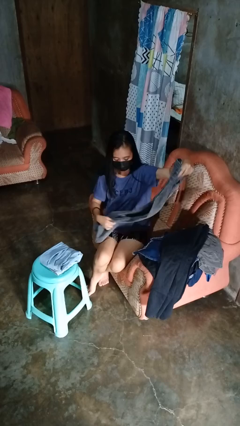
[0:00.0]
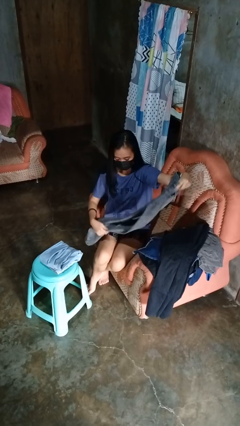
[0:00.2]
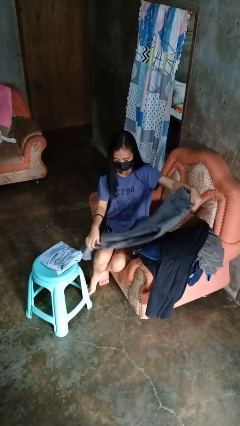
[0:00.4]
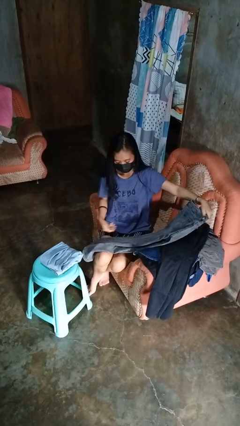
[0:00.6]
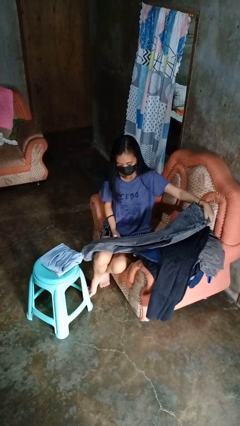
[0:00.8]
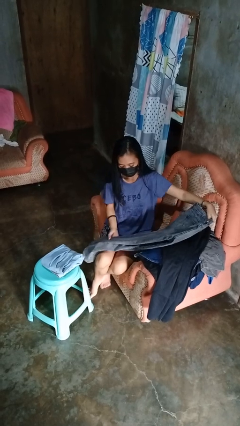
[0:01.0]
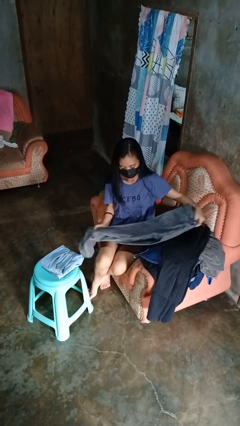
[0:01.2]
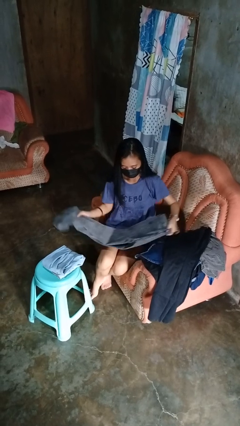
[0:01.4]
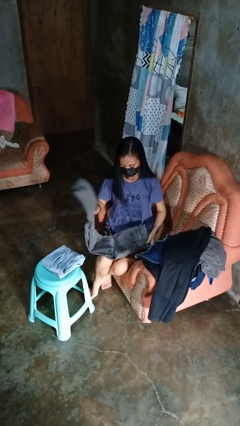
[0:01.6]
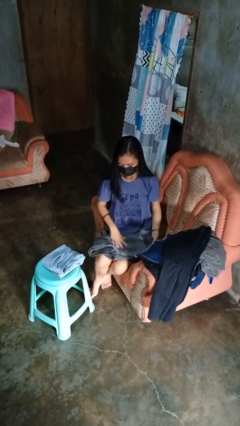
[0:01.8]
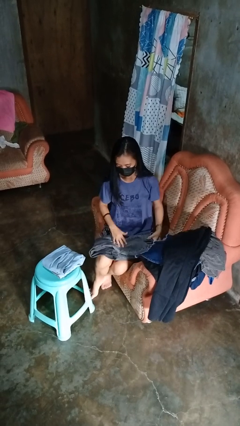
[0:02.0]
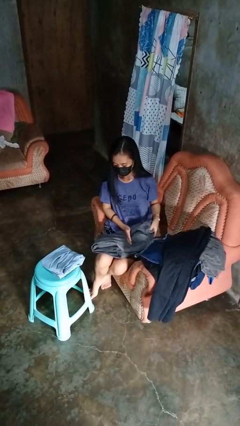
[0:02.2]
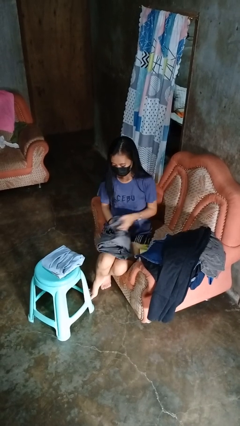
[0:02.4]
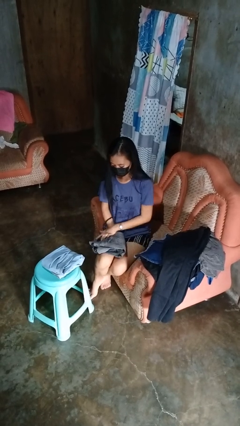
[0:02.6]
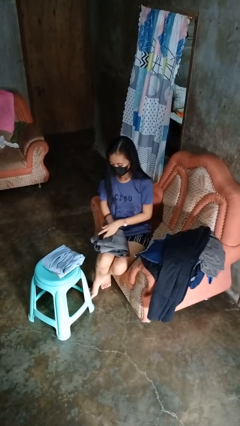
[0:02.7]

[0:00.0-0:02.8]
person folds pants

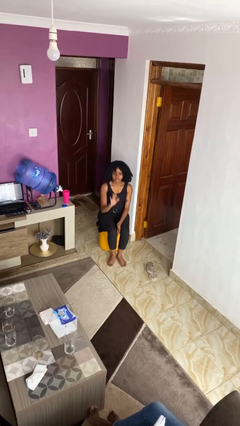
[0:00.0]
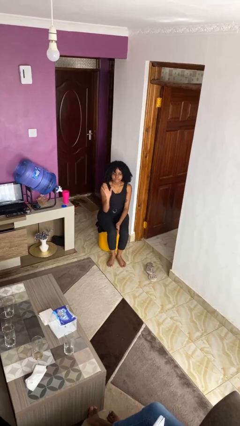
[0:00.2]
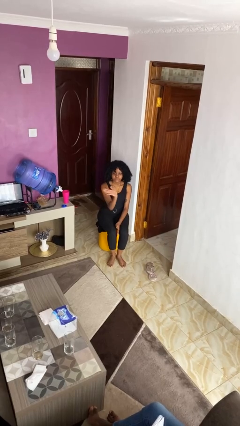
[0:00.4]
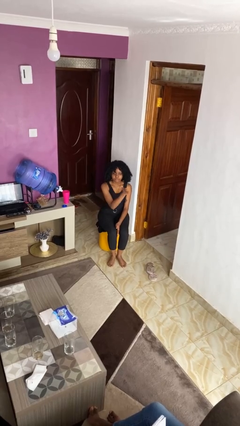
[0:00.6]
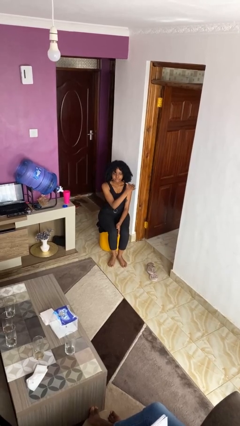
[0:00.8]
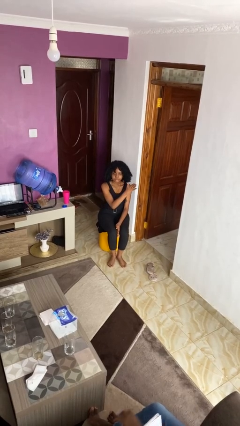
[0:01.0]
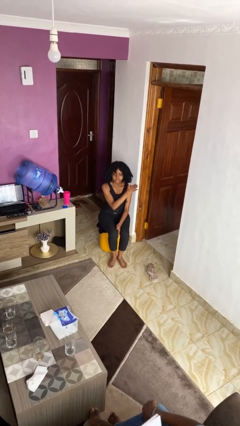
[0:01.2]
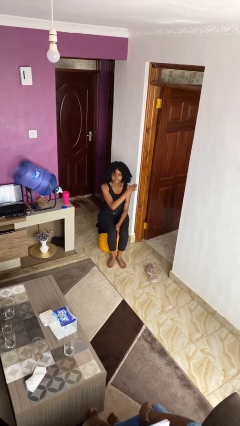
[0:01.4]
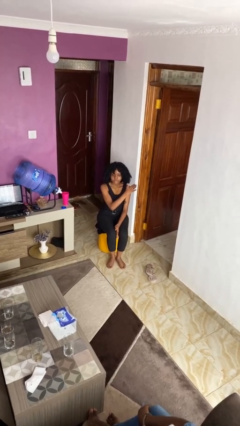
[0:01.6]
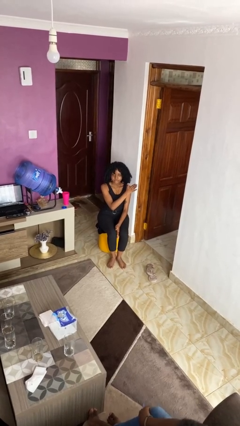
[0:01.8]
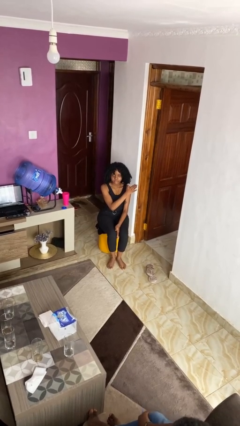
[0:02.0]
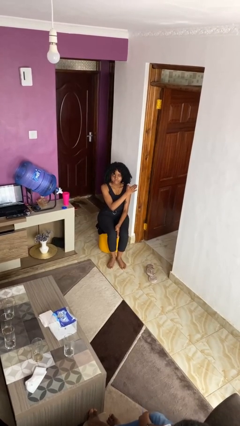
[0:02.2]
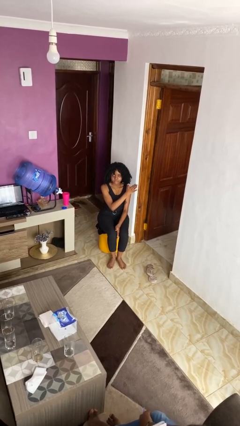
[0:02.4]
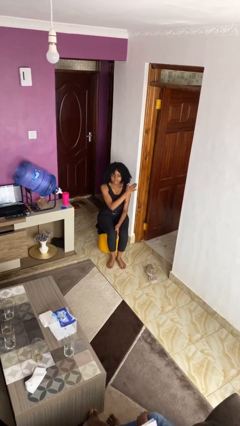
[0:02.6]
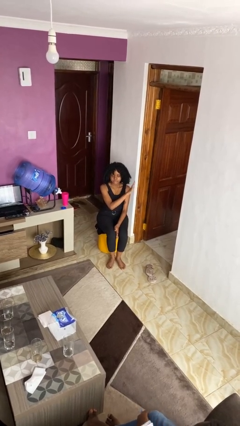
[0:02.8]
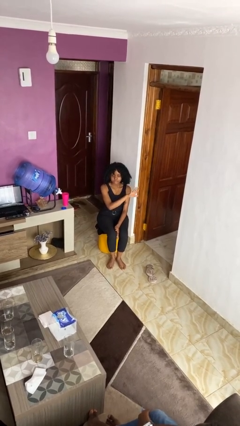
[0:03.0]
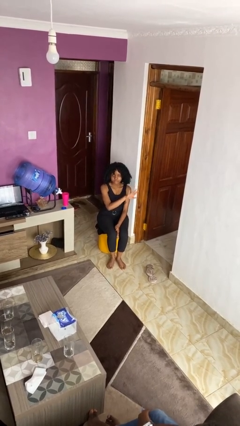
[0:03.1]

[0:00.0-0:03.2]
person gestures swipe left

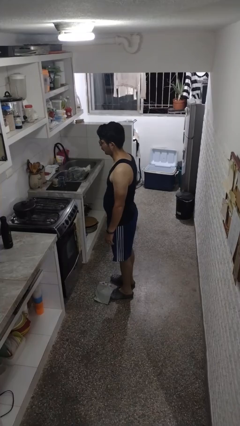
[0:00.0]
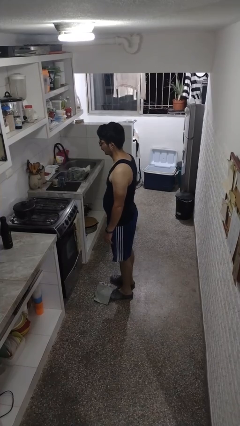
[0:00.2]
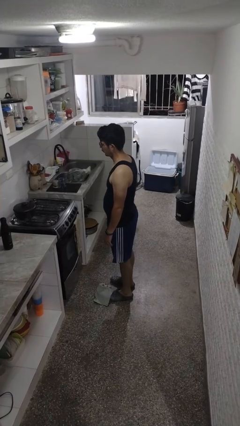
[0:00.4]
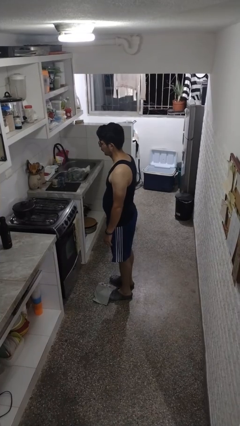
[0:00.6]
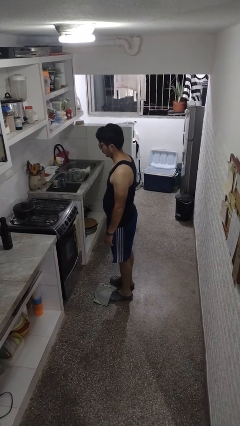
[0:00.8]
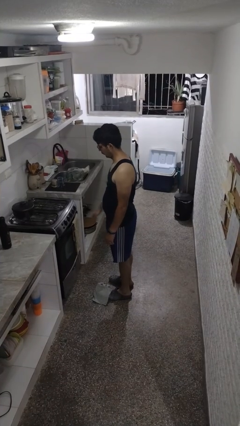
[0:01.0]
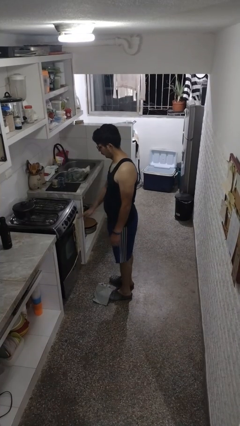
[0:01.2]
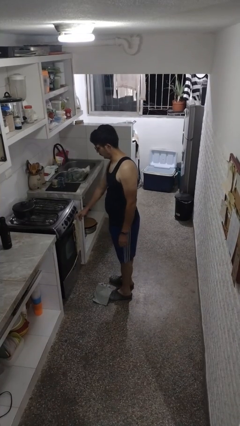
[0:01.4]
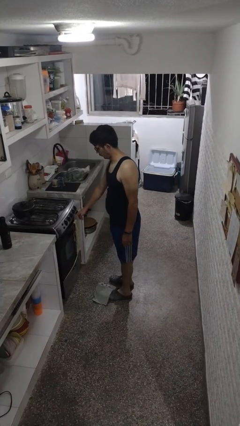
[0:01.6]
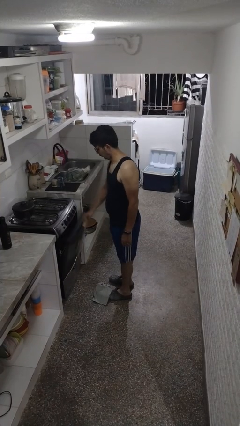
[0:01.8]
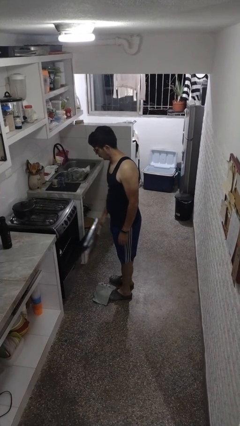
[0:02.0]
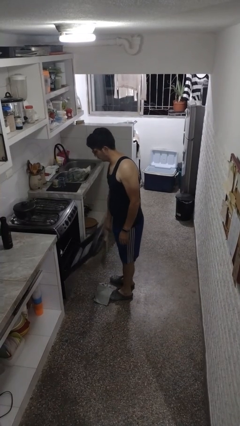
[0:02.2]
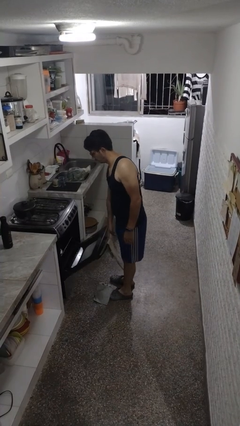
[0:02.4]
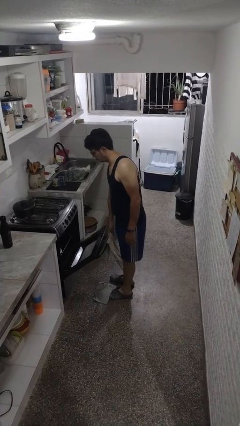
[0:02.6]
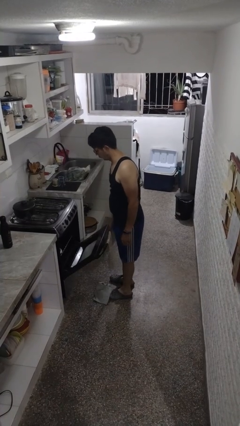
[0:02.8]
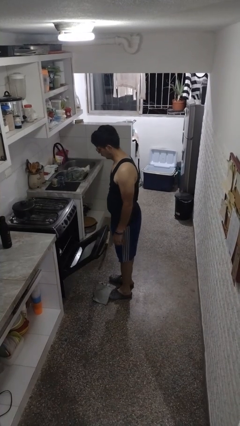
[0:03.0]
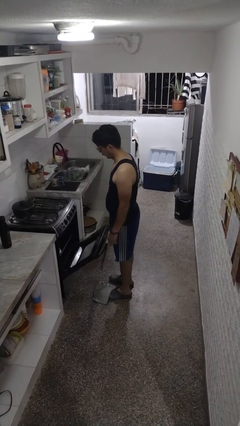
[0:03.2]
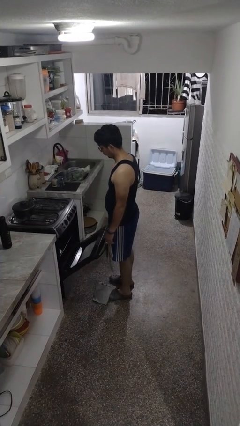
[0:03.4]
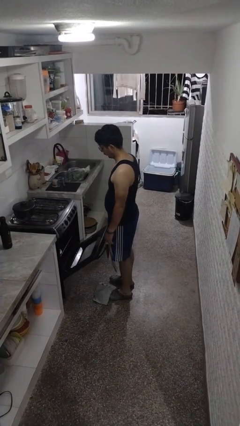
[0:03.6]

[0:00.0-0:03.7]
person opens oven door

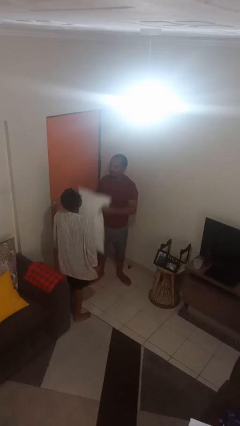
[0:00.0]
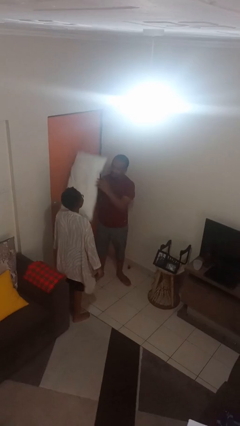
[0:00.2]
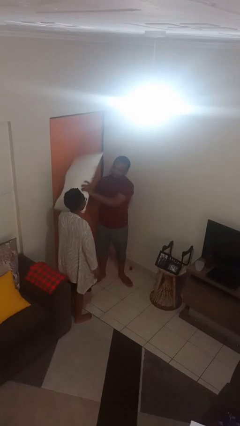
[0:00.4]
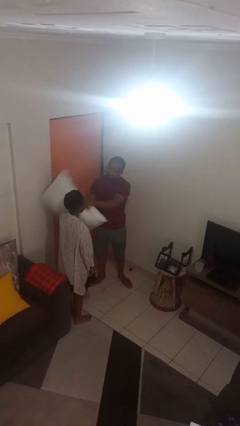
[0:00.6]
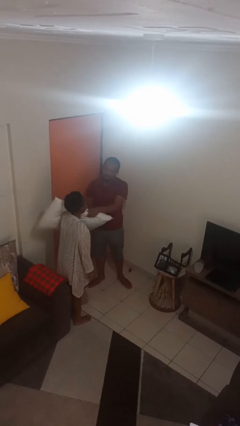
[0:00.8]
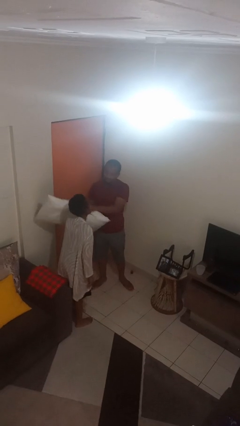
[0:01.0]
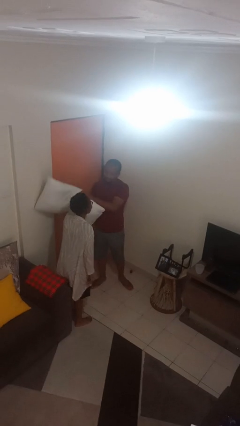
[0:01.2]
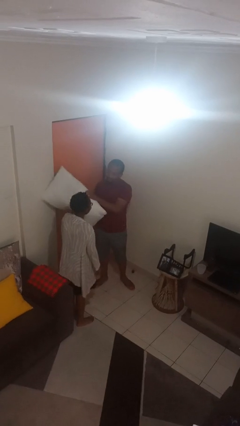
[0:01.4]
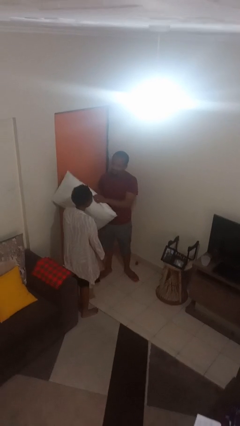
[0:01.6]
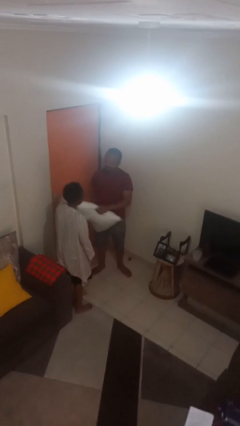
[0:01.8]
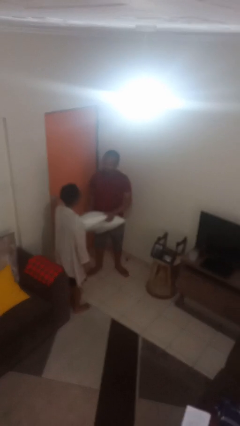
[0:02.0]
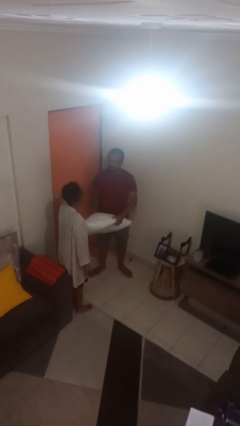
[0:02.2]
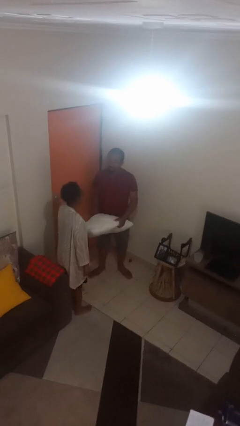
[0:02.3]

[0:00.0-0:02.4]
person hits person with pillow

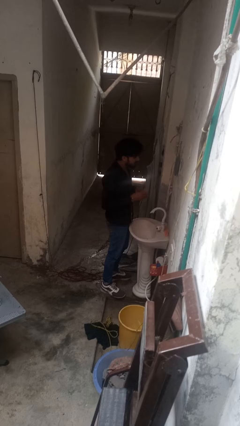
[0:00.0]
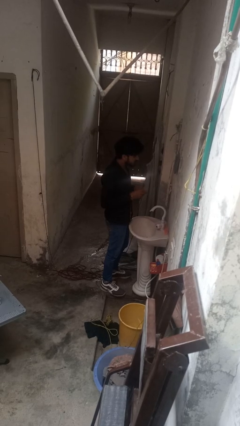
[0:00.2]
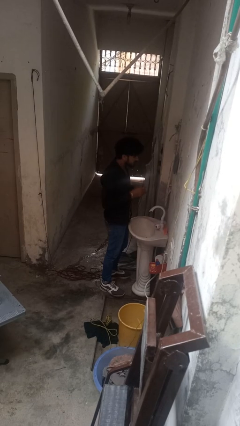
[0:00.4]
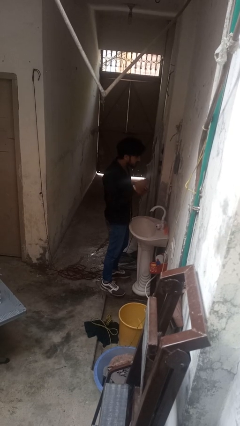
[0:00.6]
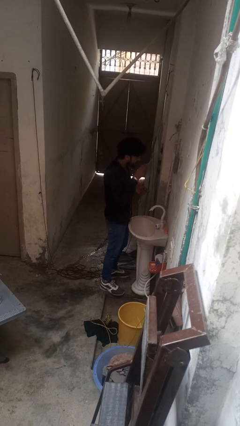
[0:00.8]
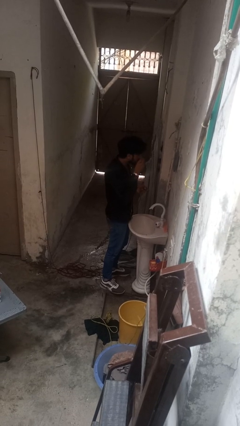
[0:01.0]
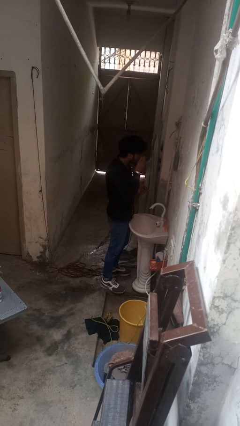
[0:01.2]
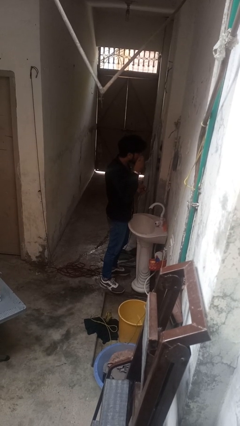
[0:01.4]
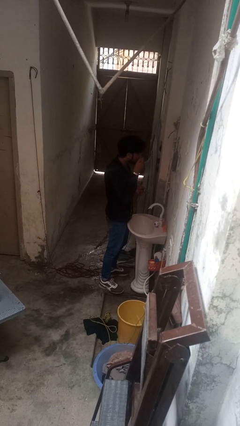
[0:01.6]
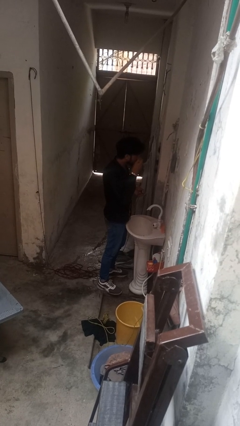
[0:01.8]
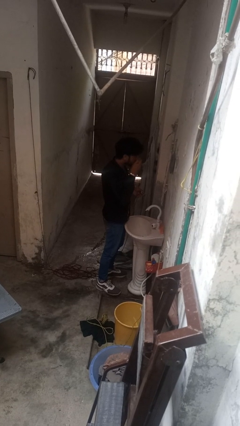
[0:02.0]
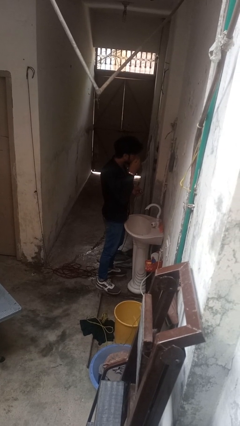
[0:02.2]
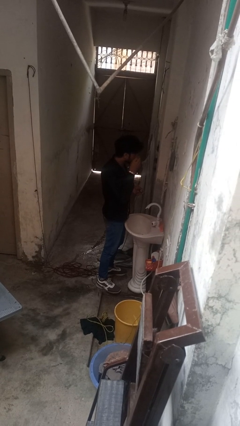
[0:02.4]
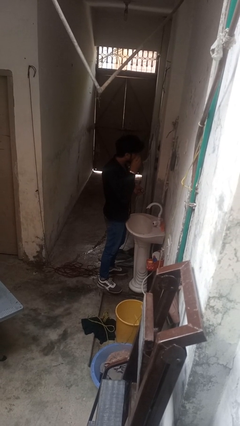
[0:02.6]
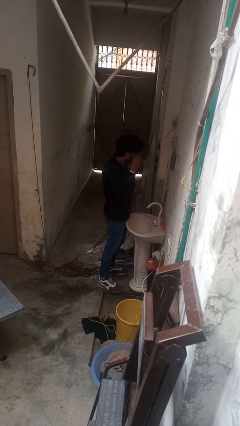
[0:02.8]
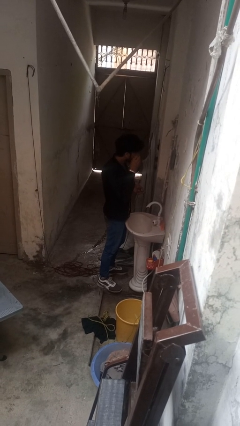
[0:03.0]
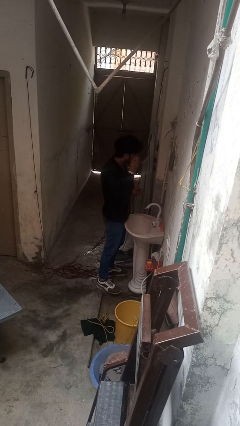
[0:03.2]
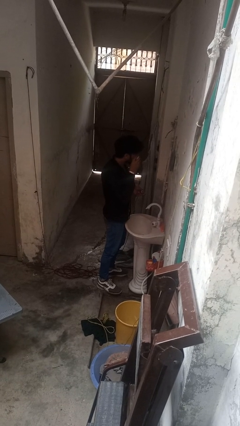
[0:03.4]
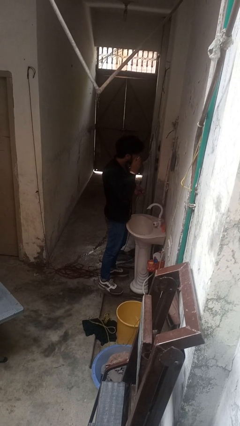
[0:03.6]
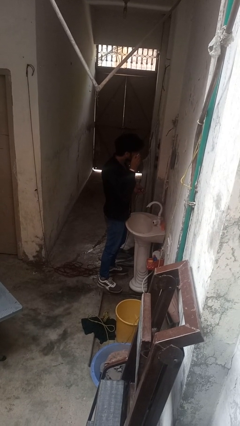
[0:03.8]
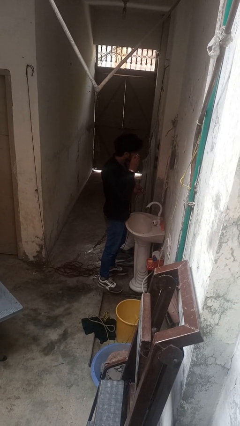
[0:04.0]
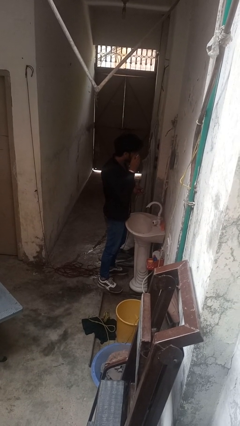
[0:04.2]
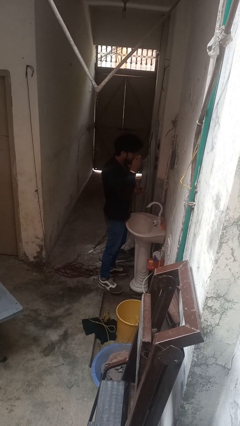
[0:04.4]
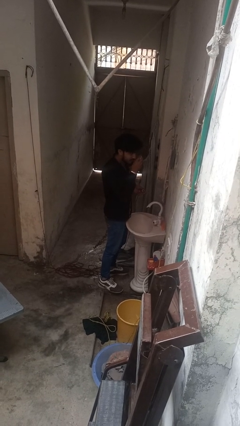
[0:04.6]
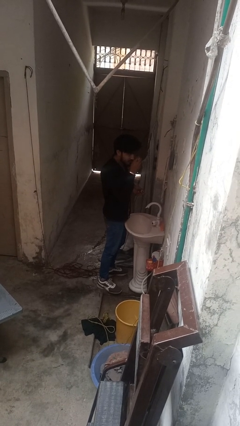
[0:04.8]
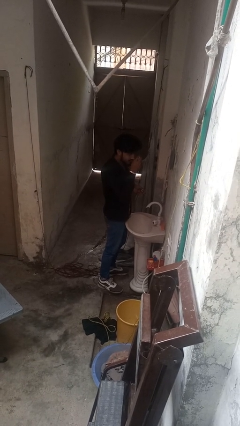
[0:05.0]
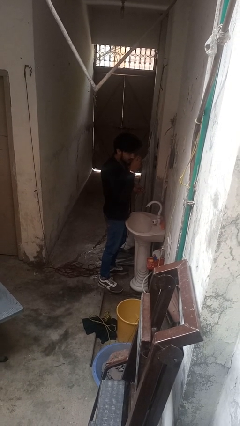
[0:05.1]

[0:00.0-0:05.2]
person applies eye makeup

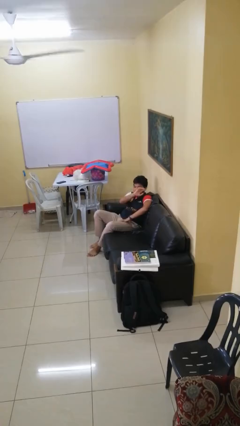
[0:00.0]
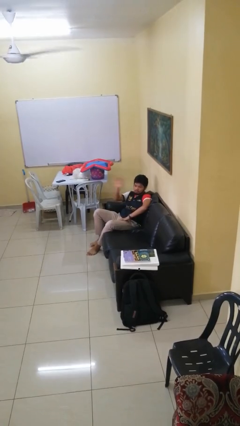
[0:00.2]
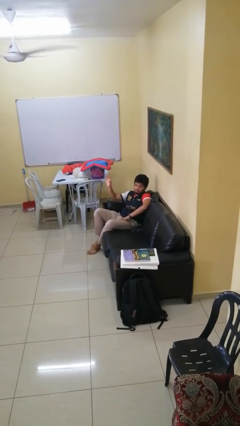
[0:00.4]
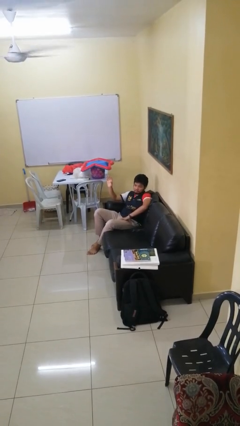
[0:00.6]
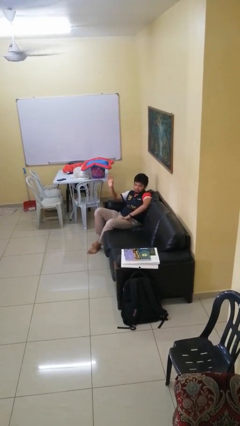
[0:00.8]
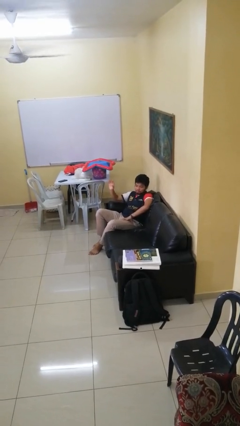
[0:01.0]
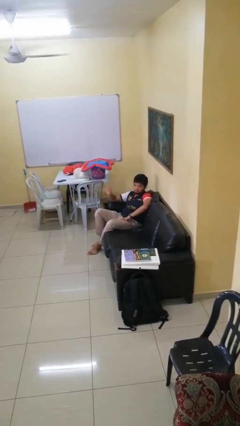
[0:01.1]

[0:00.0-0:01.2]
person gestures swipe right
